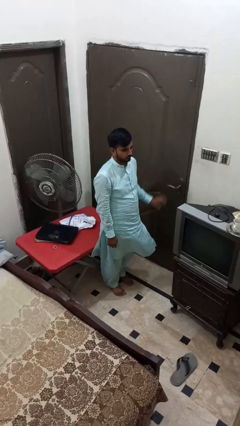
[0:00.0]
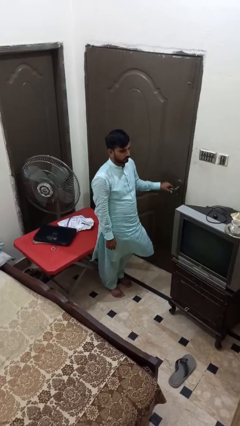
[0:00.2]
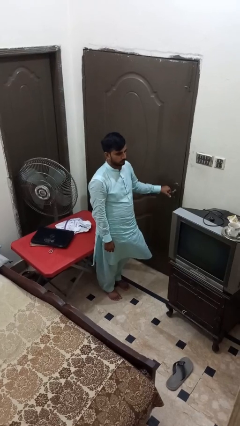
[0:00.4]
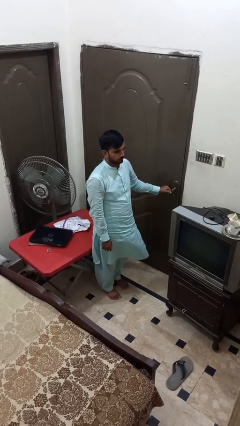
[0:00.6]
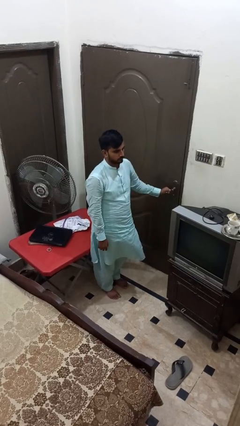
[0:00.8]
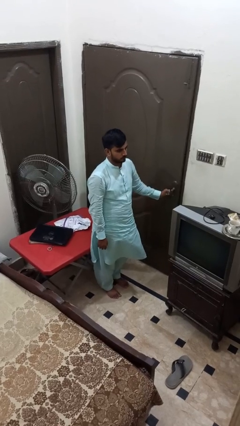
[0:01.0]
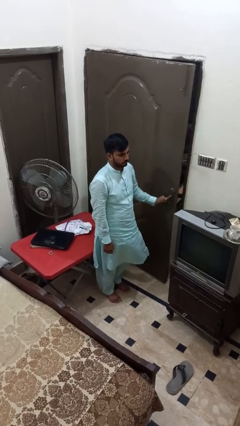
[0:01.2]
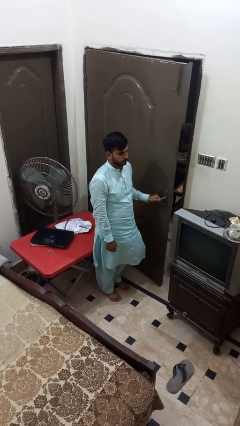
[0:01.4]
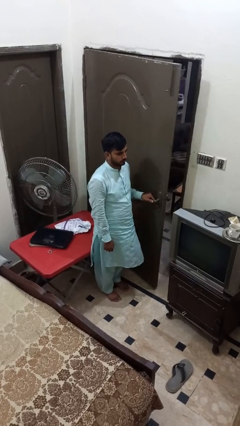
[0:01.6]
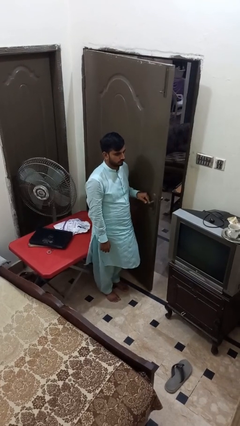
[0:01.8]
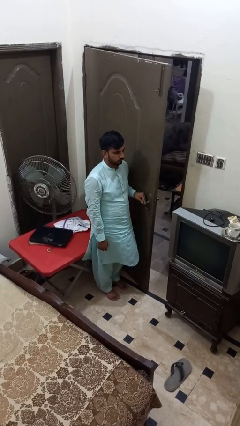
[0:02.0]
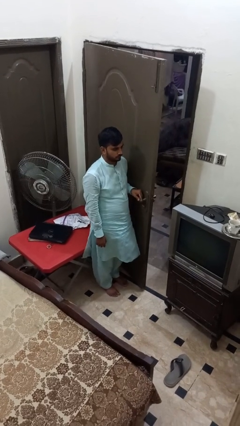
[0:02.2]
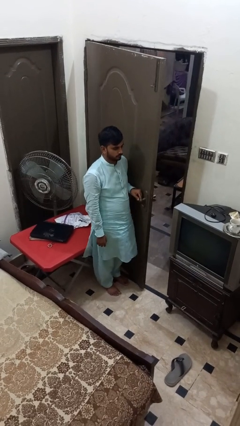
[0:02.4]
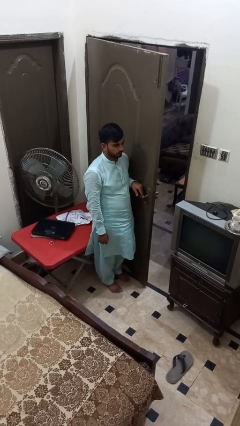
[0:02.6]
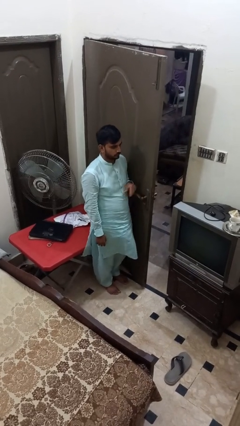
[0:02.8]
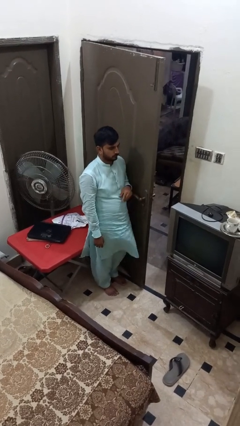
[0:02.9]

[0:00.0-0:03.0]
person opens facility door

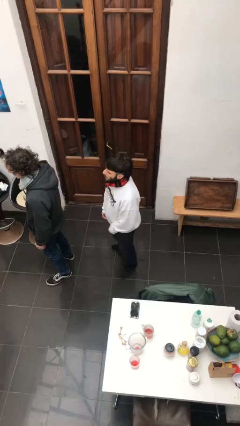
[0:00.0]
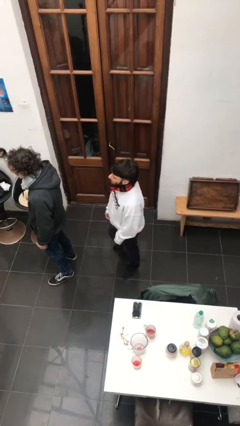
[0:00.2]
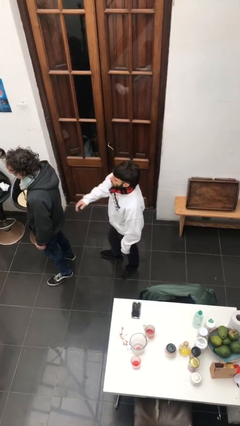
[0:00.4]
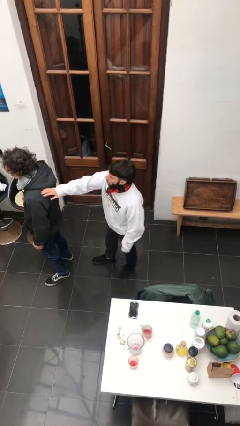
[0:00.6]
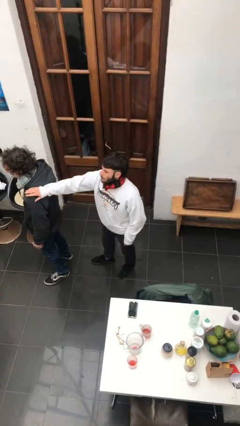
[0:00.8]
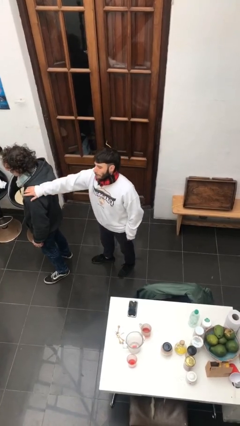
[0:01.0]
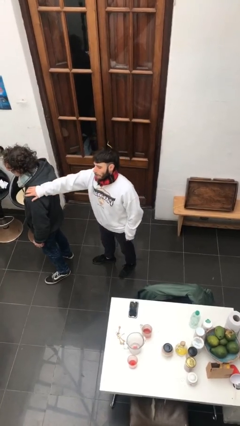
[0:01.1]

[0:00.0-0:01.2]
person grabs person by shoulder

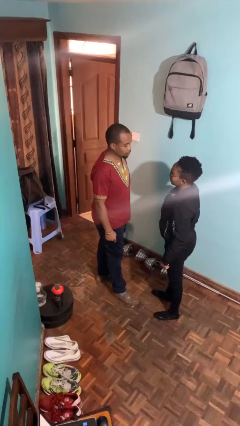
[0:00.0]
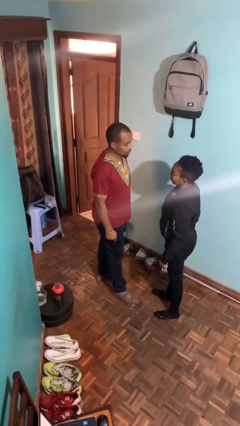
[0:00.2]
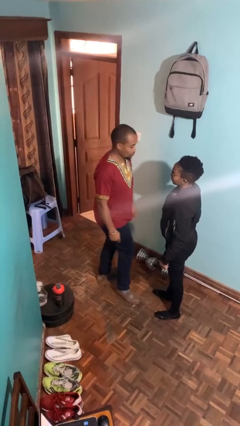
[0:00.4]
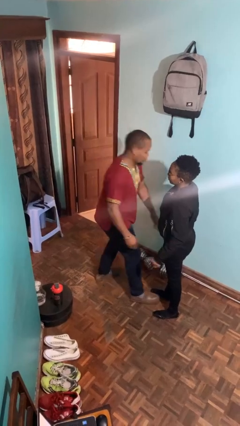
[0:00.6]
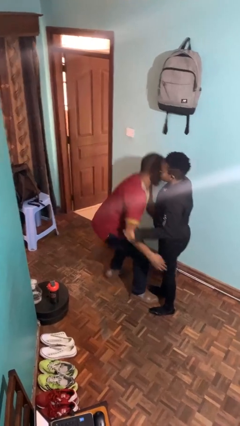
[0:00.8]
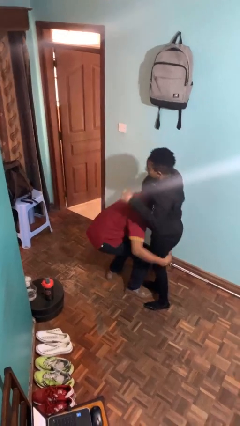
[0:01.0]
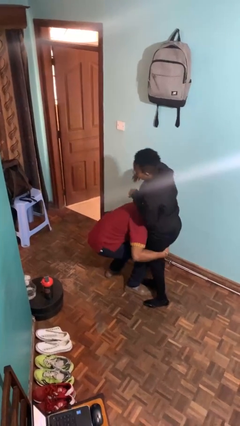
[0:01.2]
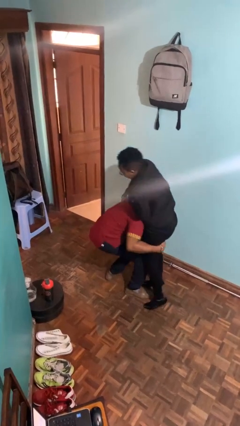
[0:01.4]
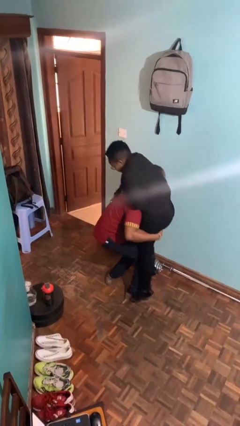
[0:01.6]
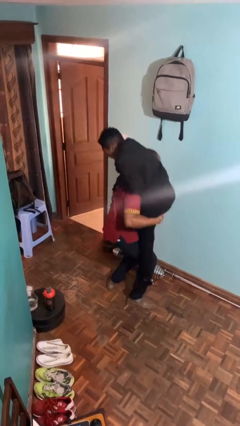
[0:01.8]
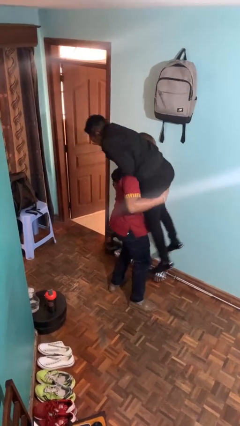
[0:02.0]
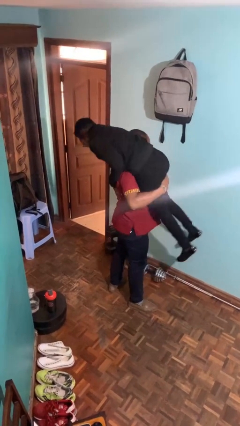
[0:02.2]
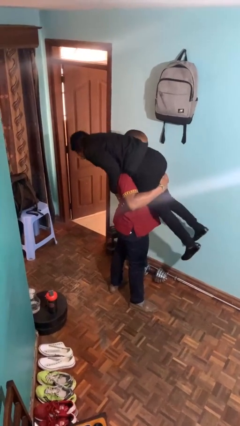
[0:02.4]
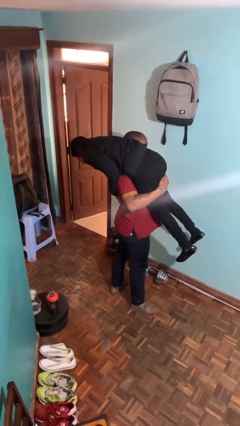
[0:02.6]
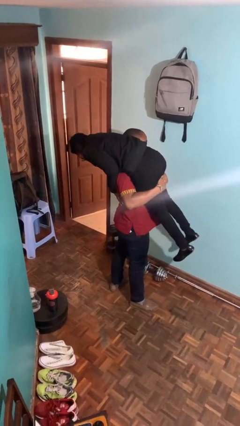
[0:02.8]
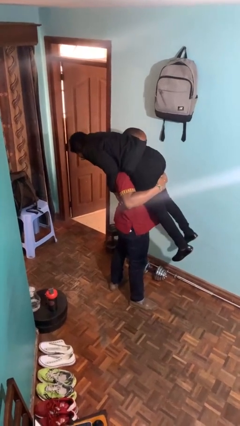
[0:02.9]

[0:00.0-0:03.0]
person carries person over shoulder

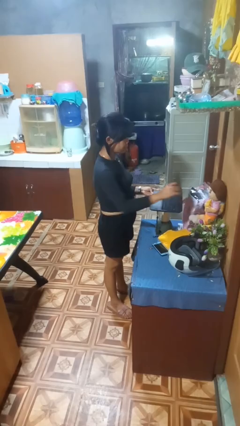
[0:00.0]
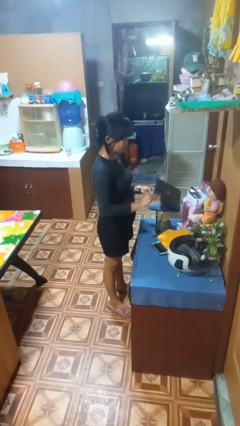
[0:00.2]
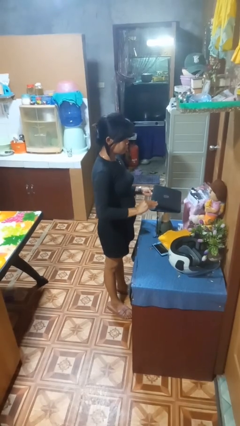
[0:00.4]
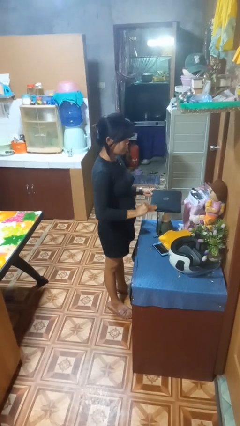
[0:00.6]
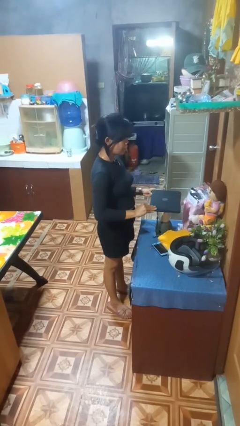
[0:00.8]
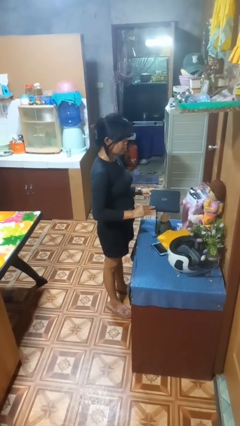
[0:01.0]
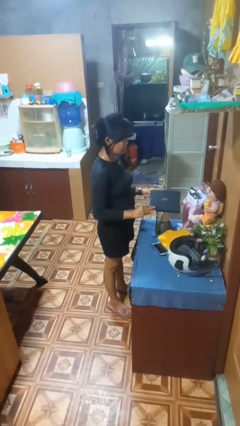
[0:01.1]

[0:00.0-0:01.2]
person closes laptop

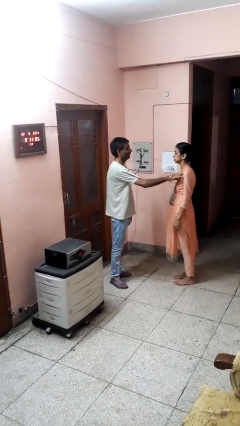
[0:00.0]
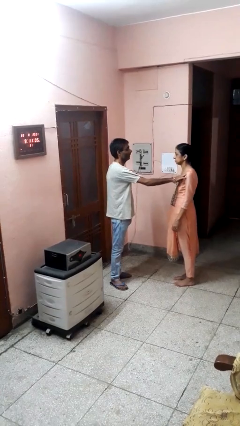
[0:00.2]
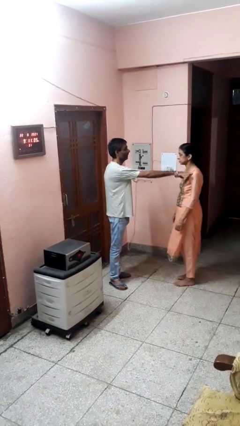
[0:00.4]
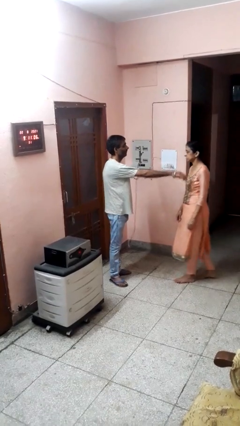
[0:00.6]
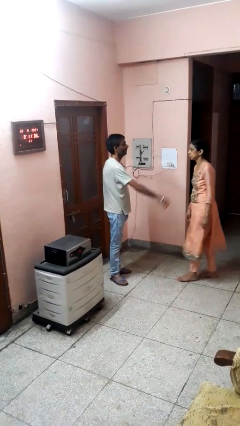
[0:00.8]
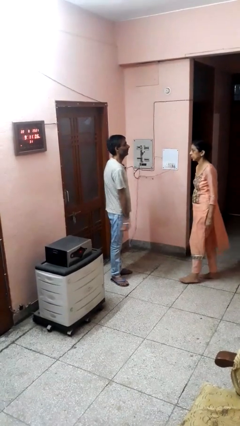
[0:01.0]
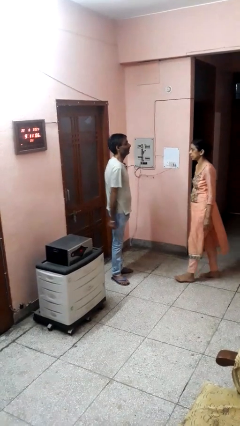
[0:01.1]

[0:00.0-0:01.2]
person shoves person

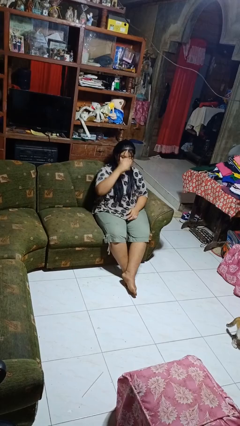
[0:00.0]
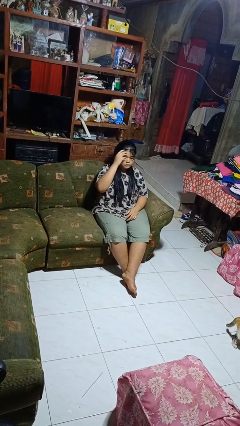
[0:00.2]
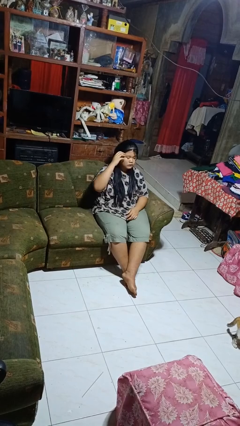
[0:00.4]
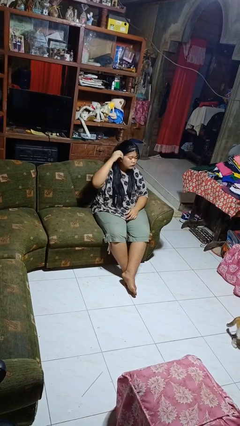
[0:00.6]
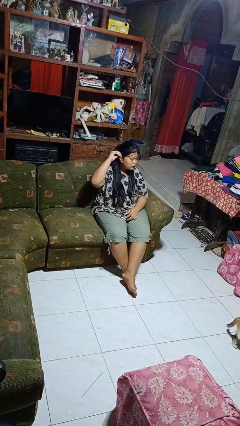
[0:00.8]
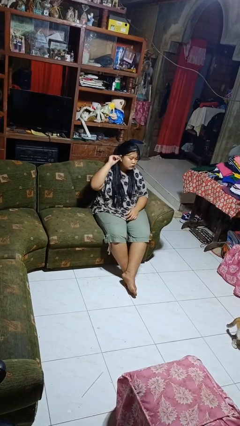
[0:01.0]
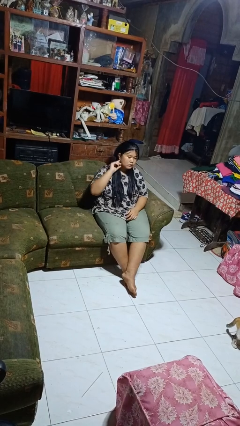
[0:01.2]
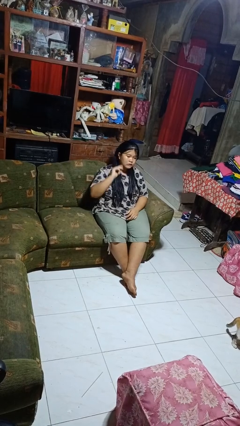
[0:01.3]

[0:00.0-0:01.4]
person strokes hair

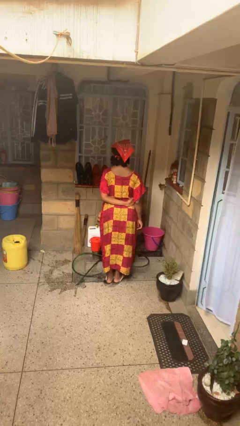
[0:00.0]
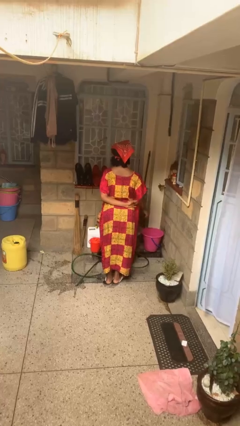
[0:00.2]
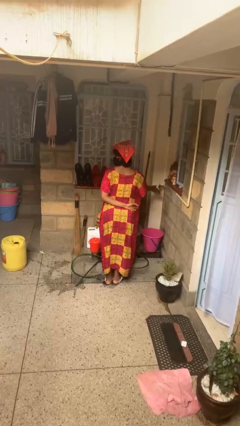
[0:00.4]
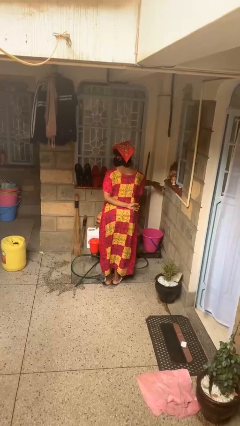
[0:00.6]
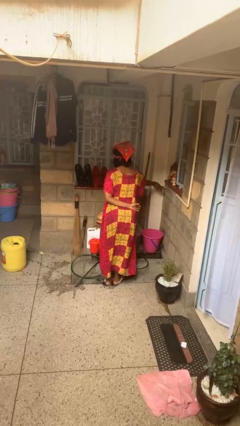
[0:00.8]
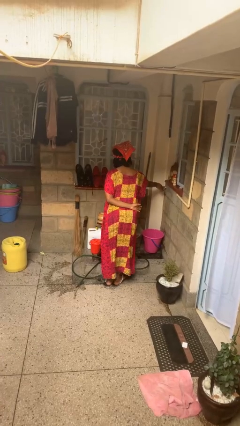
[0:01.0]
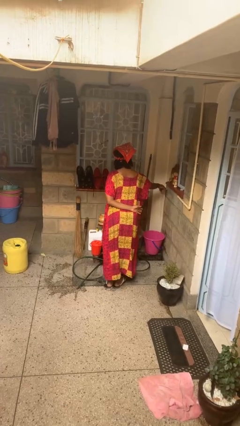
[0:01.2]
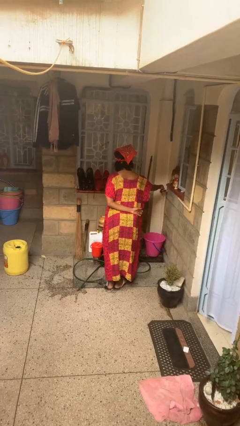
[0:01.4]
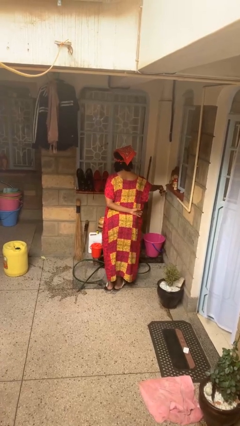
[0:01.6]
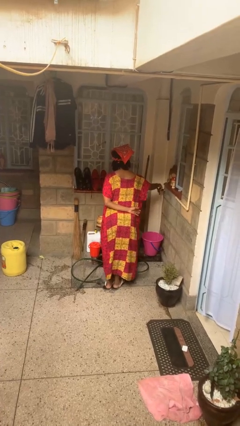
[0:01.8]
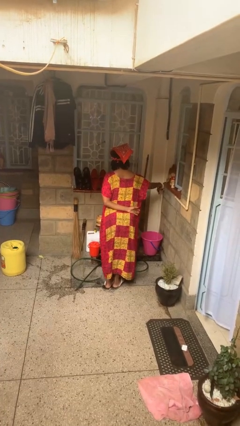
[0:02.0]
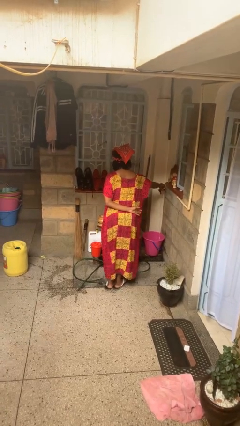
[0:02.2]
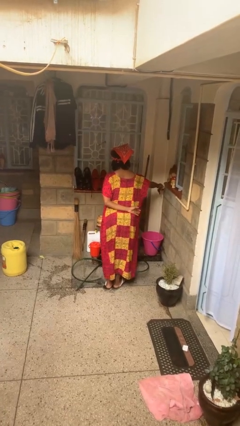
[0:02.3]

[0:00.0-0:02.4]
person turns on faucet

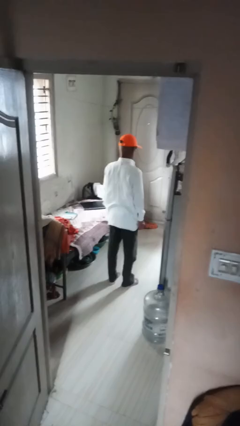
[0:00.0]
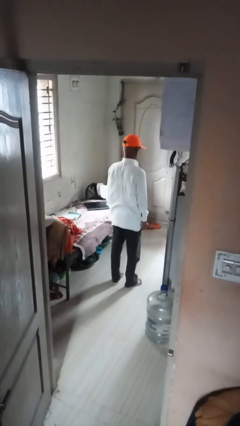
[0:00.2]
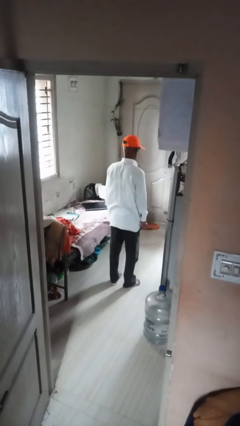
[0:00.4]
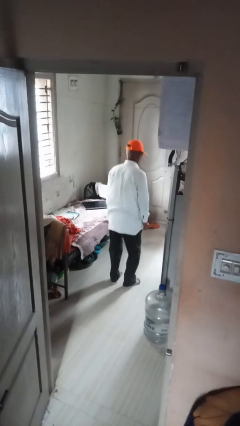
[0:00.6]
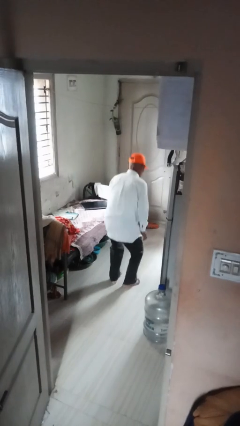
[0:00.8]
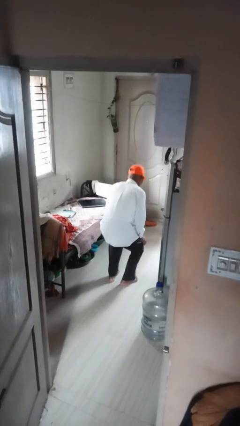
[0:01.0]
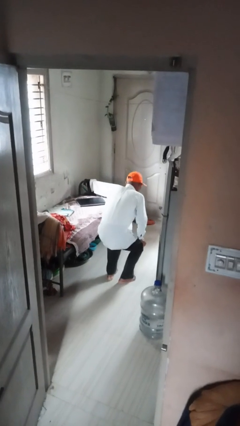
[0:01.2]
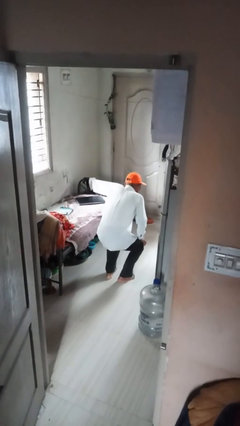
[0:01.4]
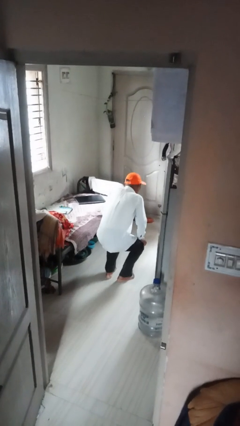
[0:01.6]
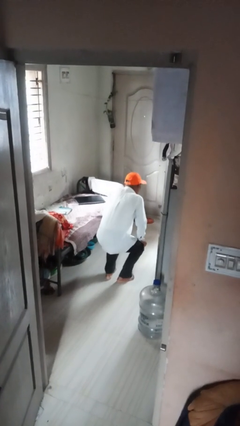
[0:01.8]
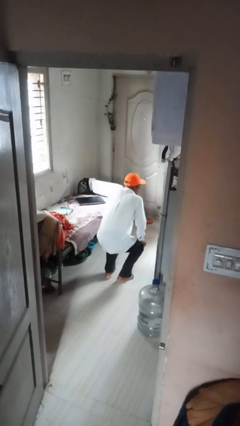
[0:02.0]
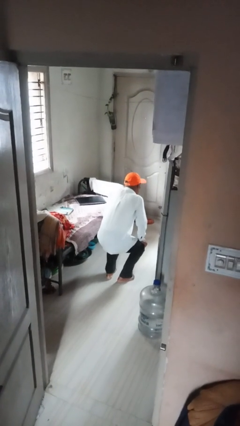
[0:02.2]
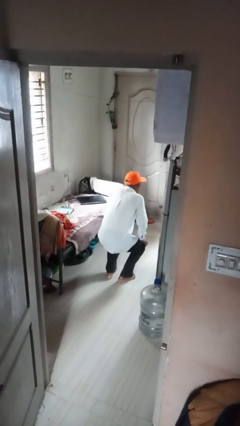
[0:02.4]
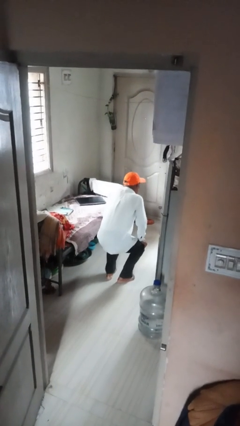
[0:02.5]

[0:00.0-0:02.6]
person squats

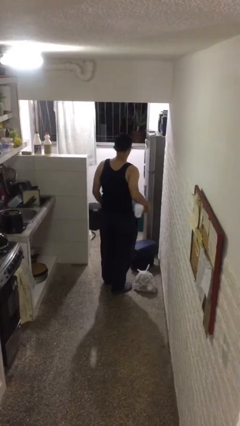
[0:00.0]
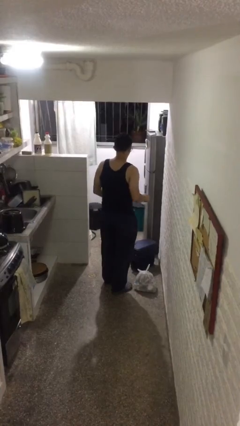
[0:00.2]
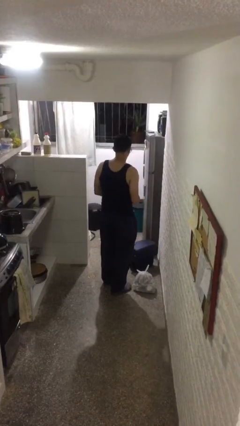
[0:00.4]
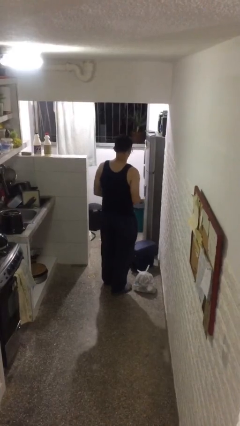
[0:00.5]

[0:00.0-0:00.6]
person inserts trashbag into trashcan

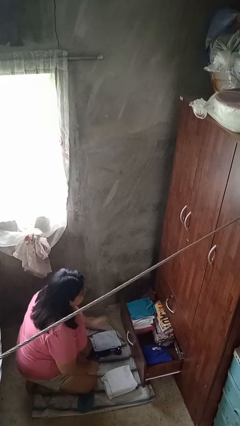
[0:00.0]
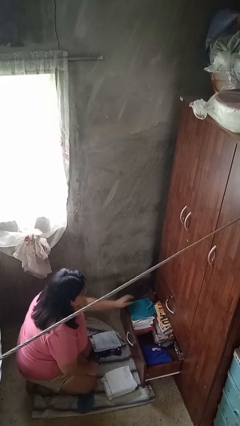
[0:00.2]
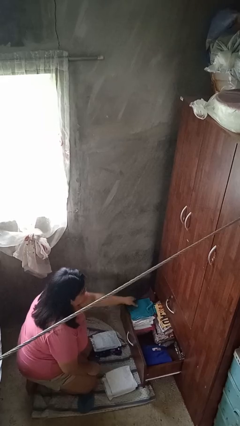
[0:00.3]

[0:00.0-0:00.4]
person takes clothes from dresser
